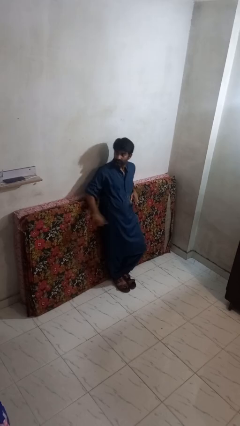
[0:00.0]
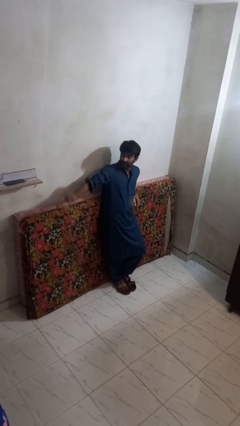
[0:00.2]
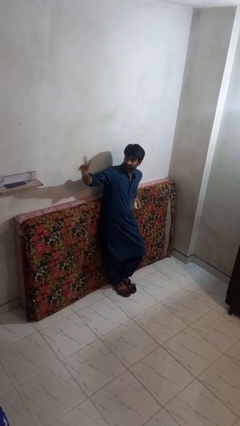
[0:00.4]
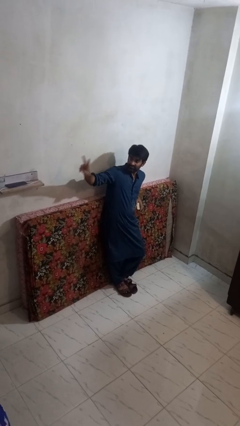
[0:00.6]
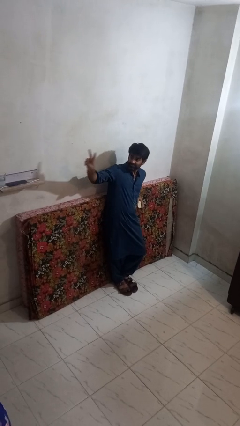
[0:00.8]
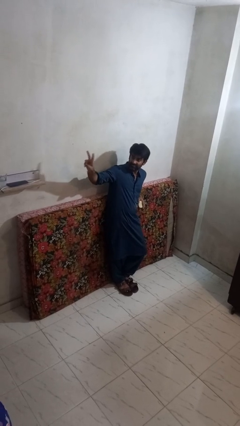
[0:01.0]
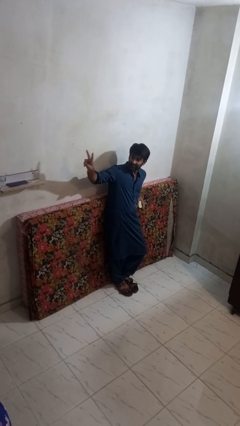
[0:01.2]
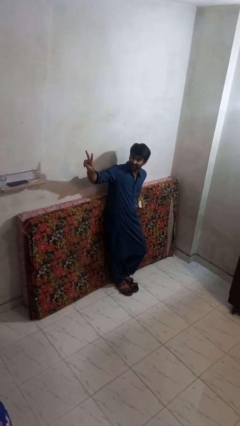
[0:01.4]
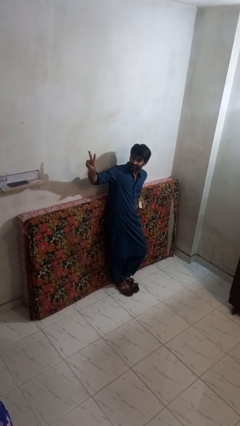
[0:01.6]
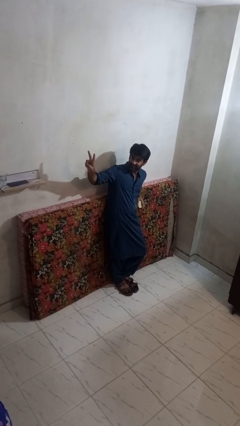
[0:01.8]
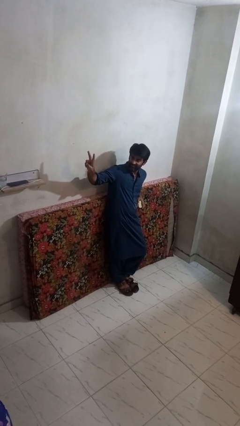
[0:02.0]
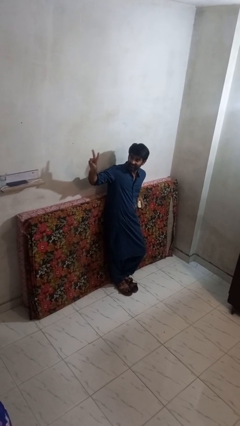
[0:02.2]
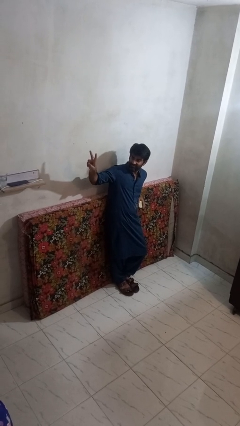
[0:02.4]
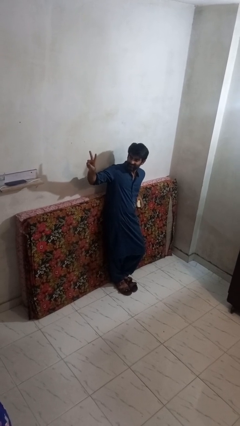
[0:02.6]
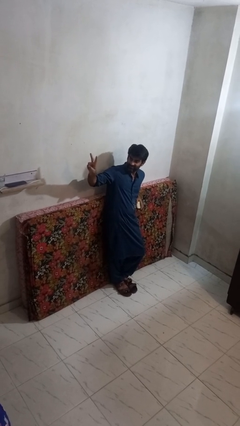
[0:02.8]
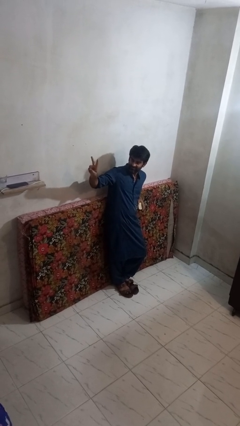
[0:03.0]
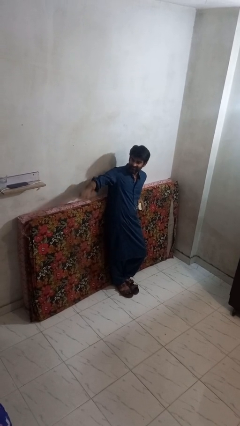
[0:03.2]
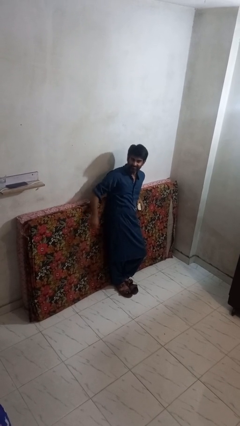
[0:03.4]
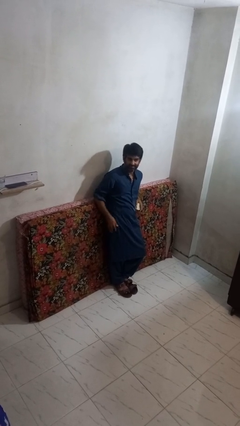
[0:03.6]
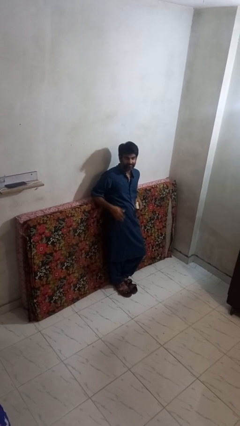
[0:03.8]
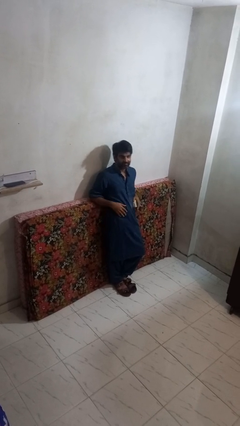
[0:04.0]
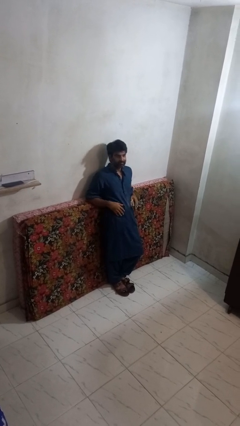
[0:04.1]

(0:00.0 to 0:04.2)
person gestures peace

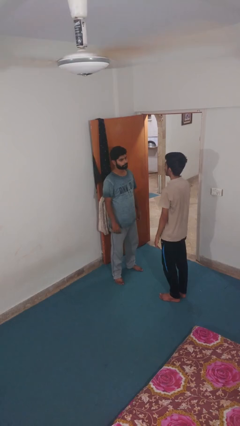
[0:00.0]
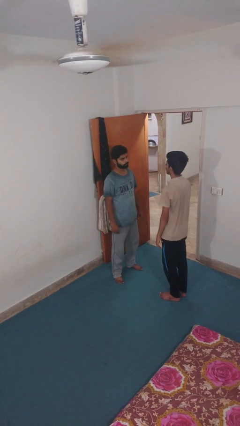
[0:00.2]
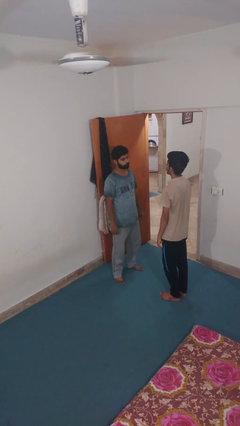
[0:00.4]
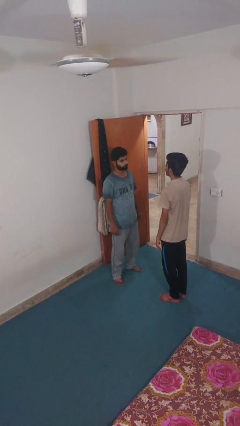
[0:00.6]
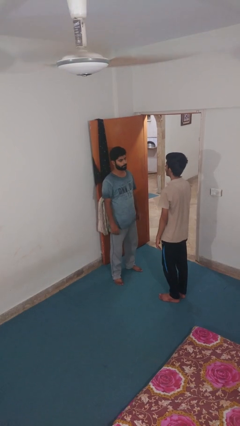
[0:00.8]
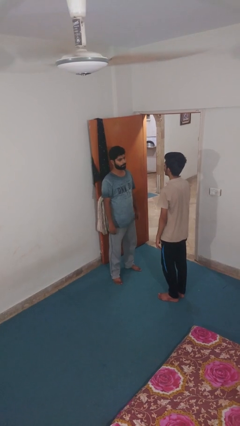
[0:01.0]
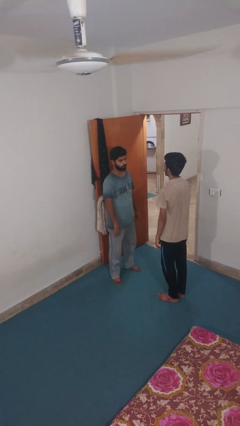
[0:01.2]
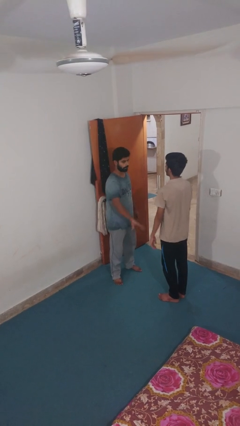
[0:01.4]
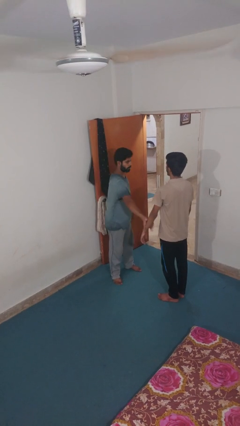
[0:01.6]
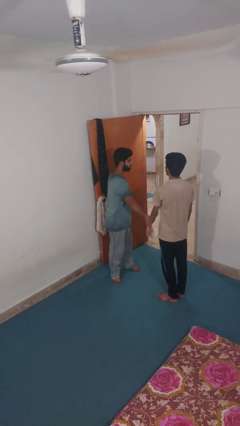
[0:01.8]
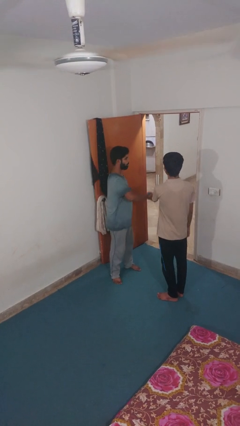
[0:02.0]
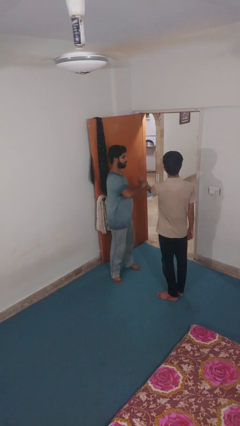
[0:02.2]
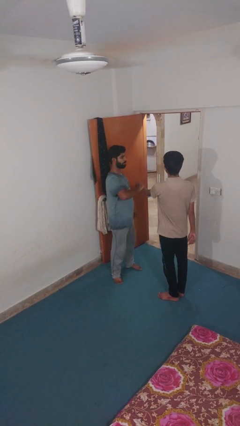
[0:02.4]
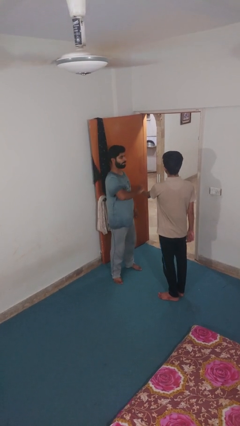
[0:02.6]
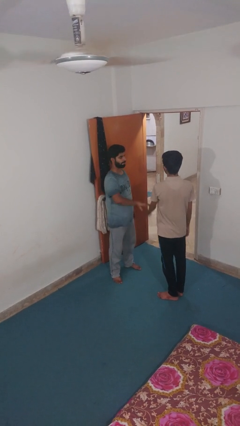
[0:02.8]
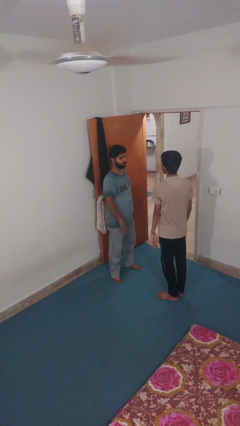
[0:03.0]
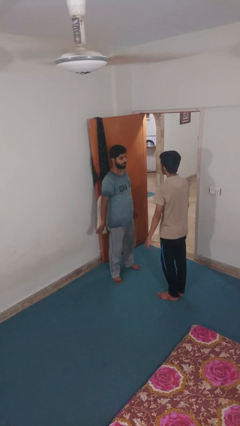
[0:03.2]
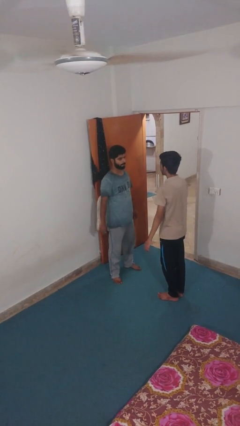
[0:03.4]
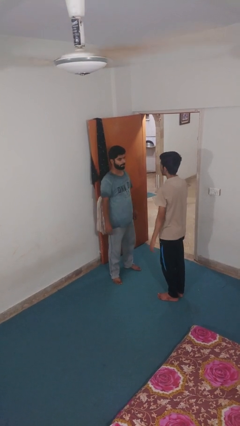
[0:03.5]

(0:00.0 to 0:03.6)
person grabs person by forearm

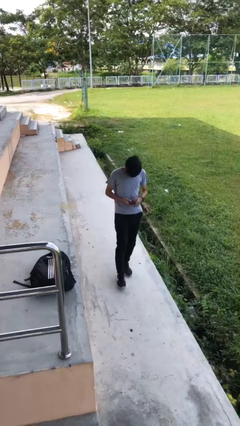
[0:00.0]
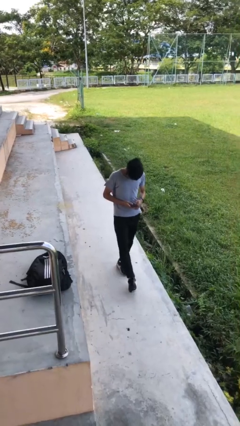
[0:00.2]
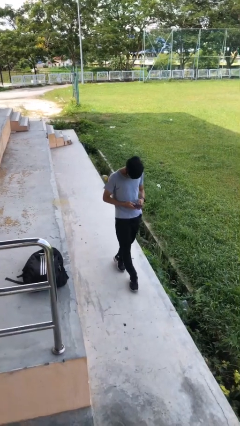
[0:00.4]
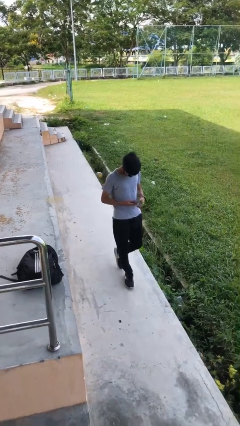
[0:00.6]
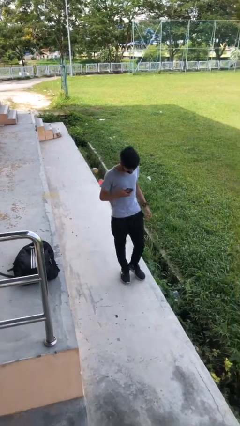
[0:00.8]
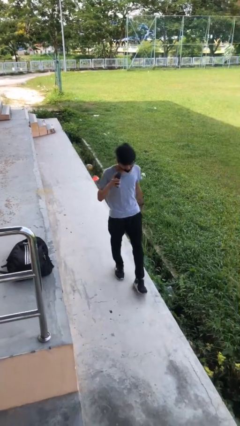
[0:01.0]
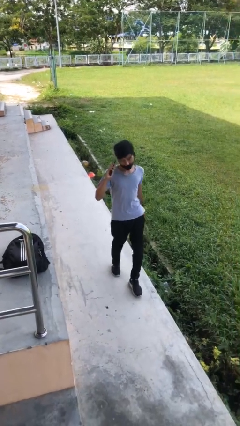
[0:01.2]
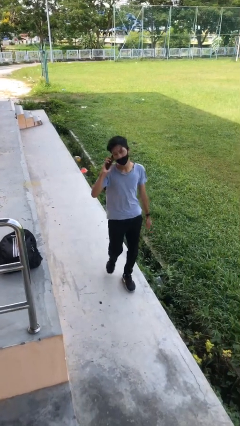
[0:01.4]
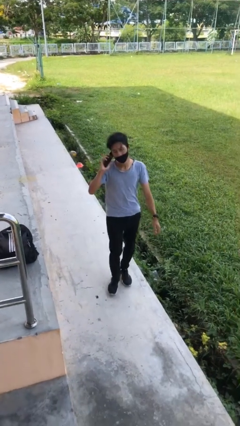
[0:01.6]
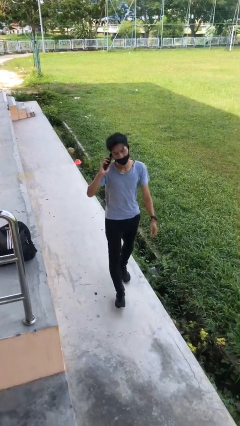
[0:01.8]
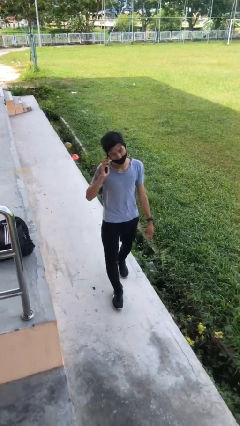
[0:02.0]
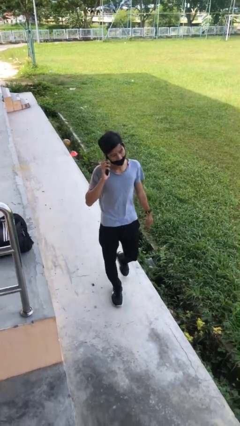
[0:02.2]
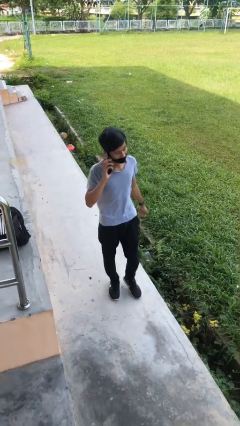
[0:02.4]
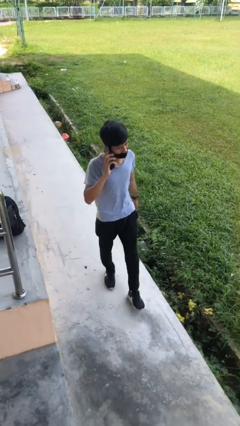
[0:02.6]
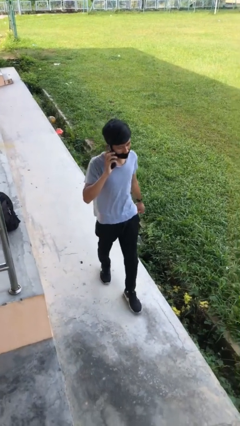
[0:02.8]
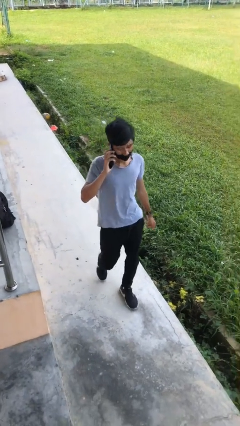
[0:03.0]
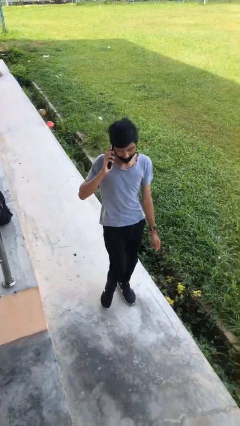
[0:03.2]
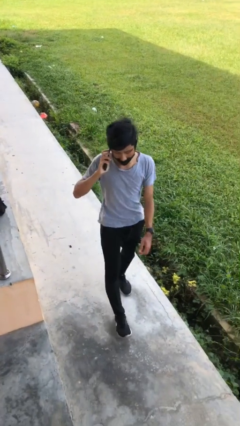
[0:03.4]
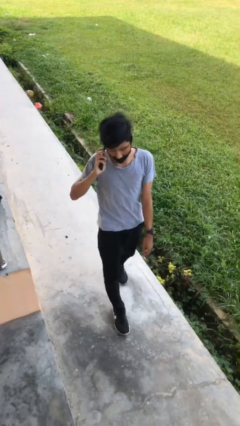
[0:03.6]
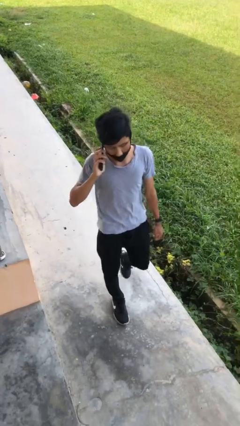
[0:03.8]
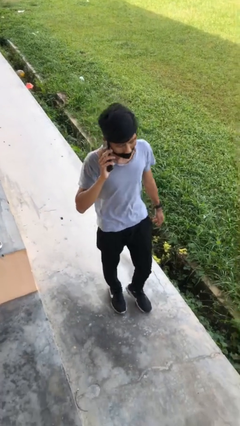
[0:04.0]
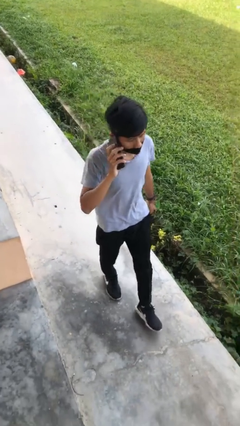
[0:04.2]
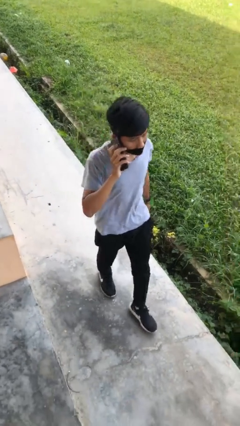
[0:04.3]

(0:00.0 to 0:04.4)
person talks on phone

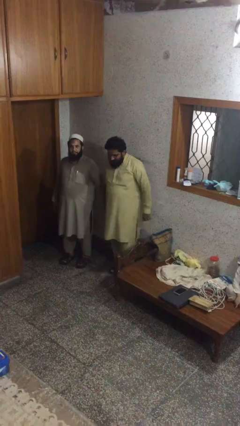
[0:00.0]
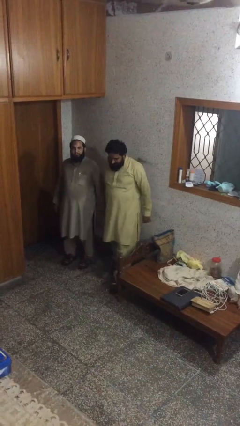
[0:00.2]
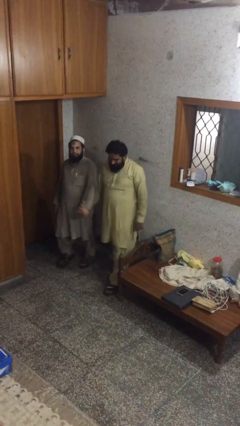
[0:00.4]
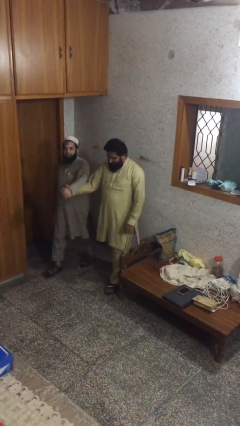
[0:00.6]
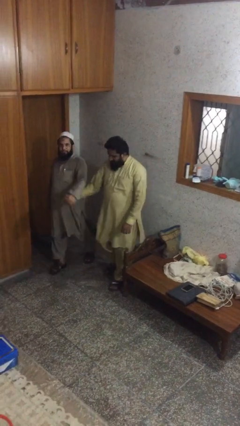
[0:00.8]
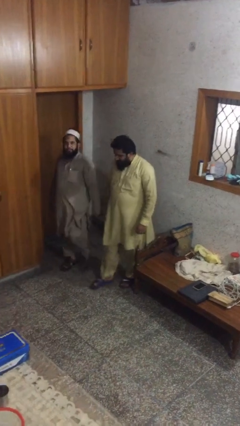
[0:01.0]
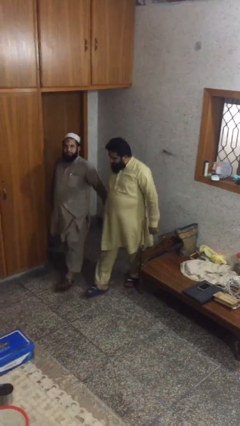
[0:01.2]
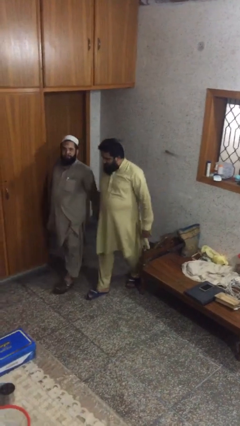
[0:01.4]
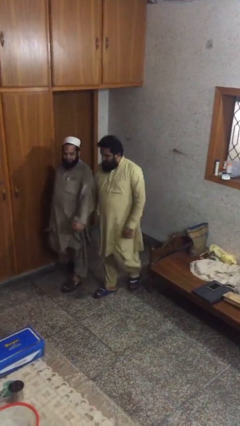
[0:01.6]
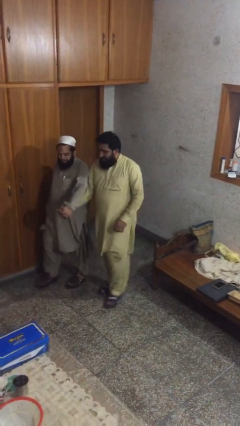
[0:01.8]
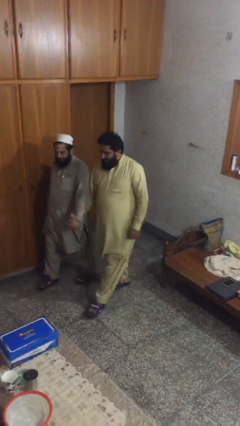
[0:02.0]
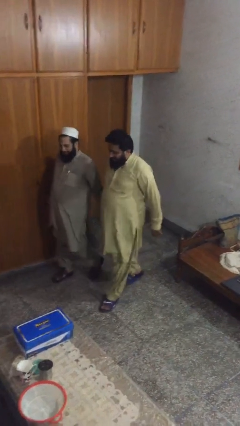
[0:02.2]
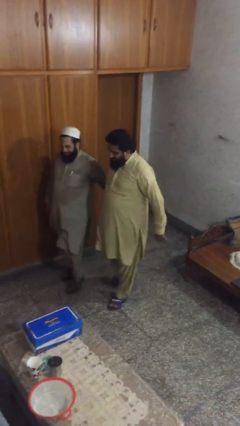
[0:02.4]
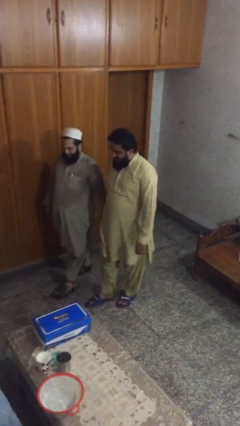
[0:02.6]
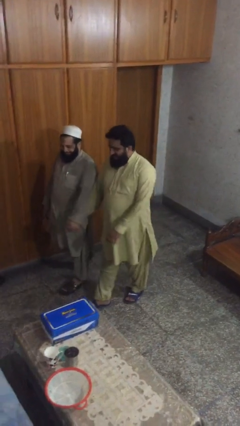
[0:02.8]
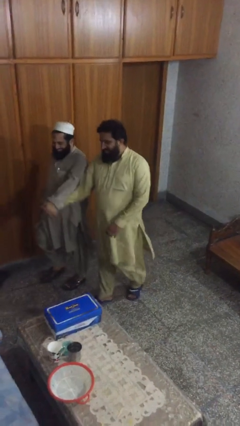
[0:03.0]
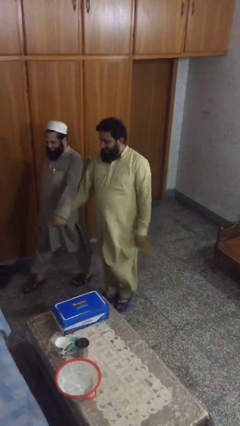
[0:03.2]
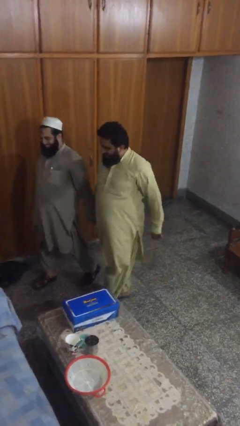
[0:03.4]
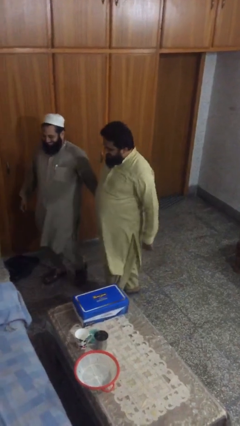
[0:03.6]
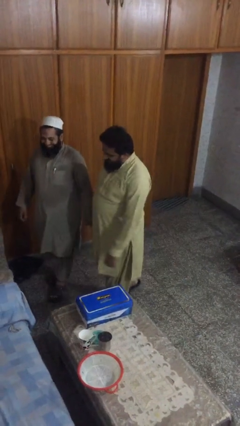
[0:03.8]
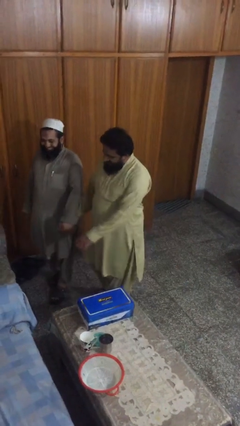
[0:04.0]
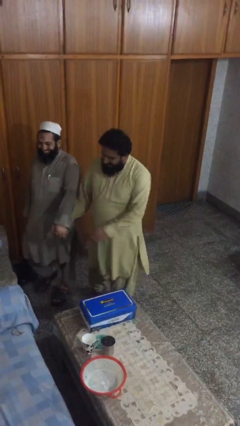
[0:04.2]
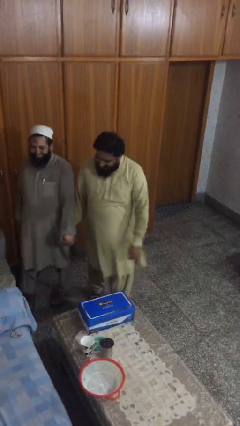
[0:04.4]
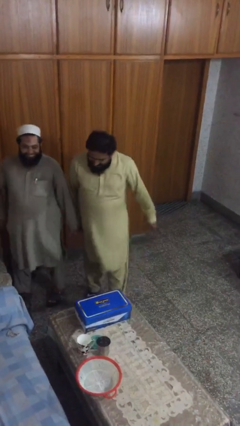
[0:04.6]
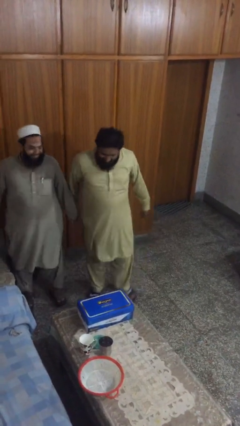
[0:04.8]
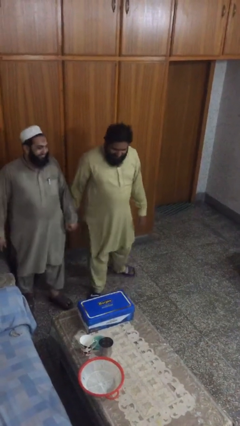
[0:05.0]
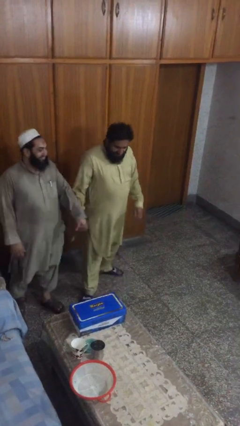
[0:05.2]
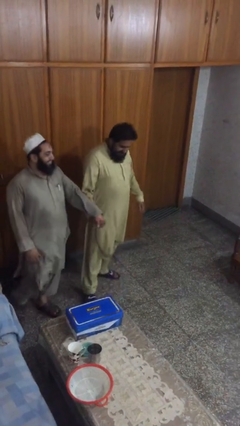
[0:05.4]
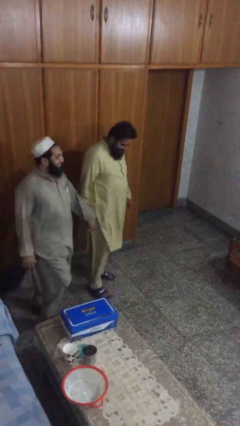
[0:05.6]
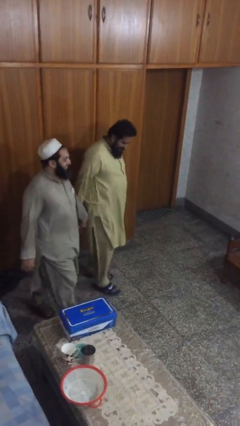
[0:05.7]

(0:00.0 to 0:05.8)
person holds hand
